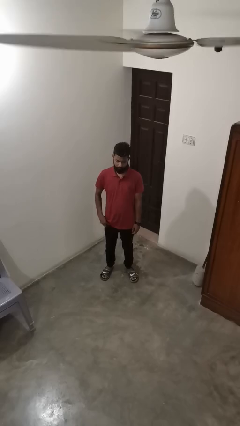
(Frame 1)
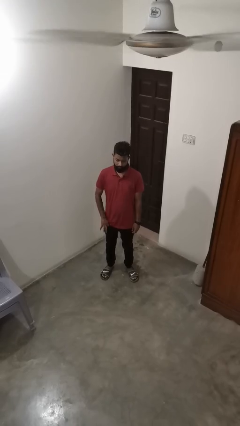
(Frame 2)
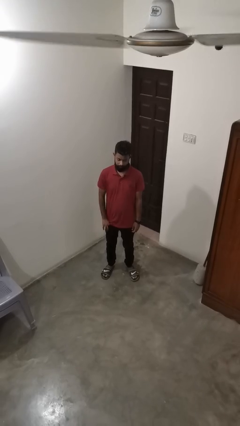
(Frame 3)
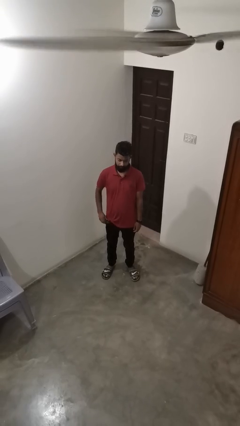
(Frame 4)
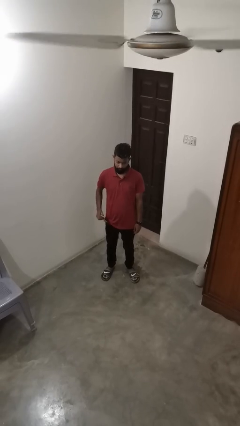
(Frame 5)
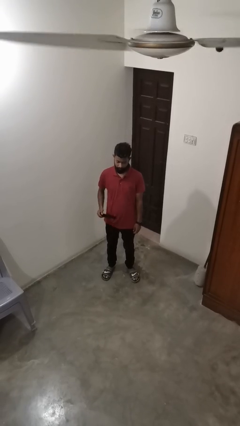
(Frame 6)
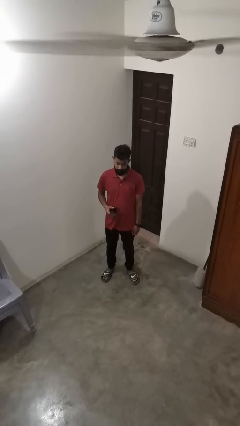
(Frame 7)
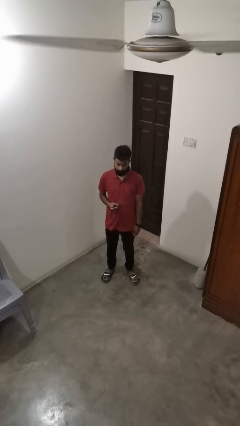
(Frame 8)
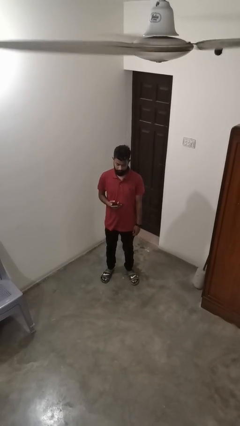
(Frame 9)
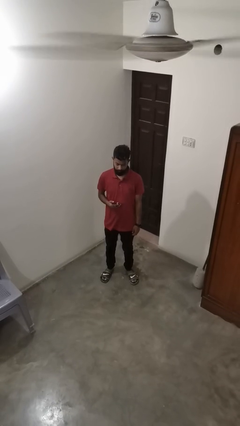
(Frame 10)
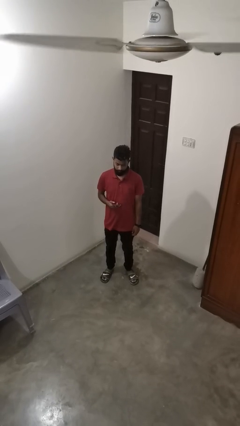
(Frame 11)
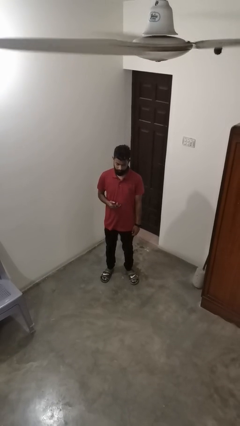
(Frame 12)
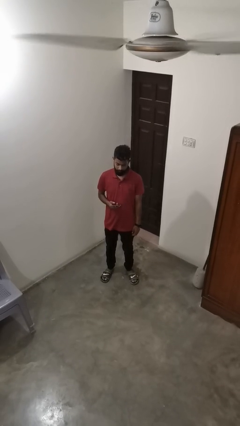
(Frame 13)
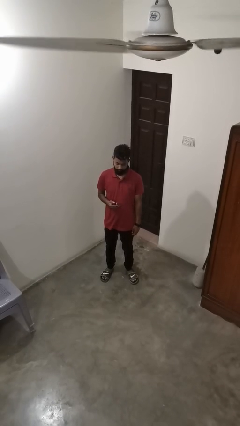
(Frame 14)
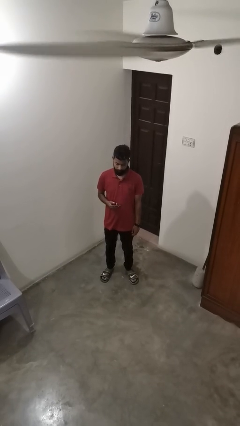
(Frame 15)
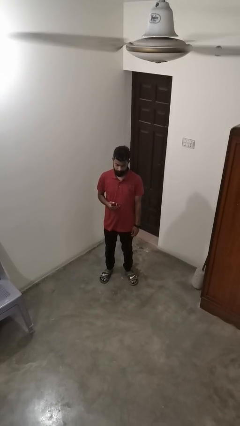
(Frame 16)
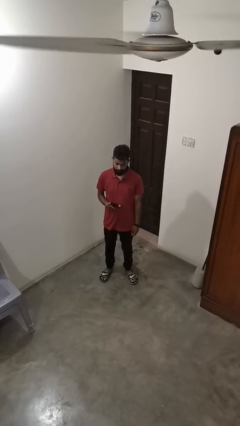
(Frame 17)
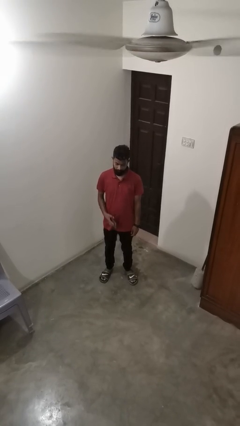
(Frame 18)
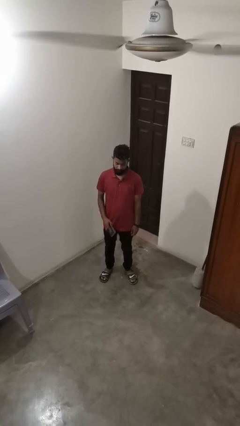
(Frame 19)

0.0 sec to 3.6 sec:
person takes phone from pocket

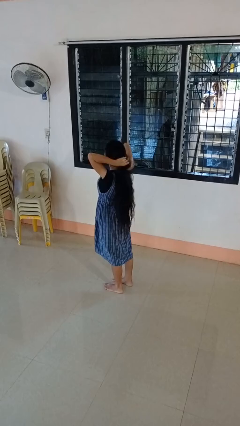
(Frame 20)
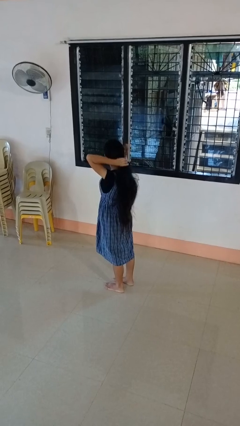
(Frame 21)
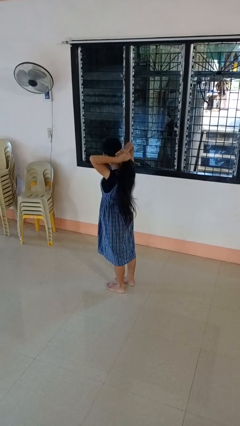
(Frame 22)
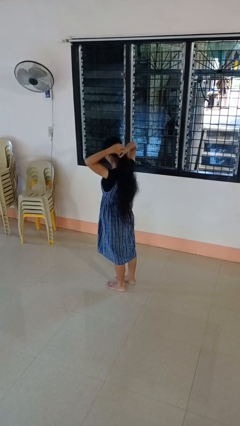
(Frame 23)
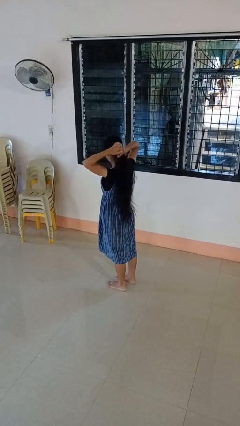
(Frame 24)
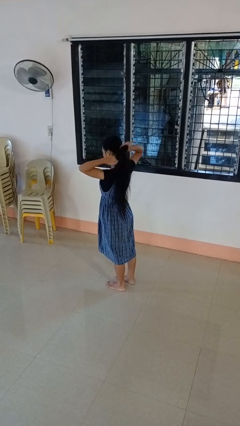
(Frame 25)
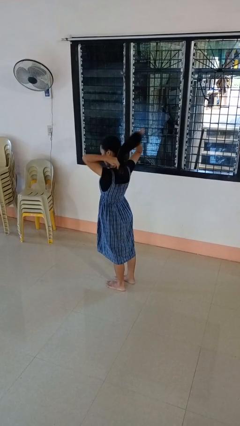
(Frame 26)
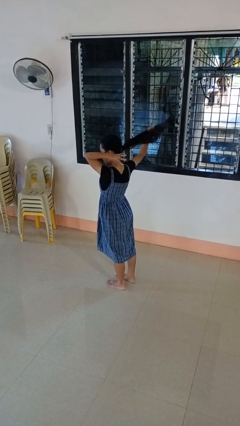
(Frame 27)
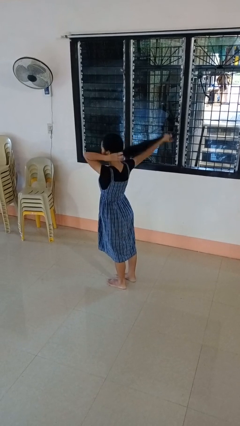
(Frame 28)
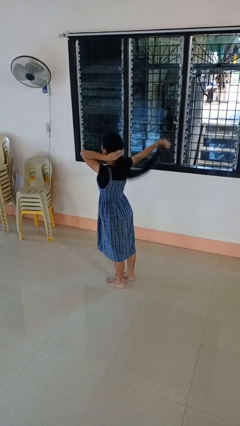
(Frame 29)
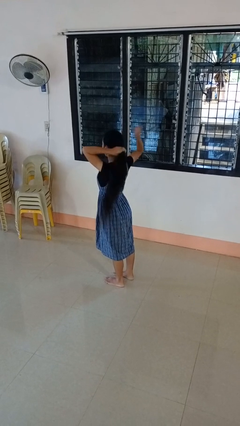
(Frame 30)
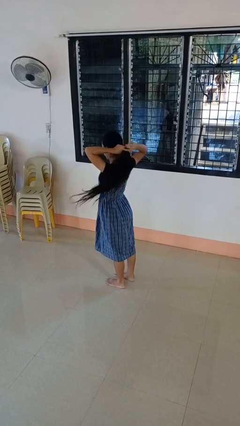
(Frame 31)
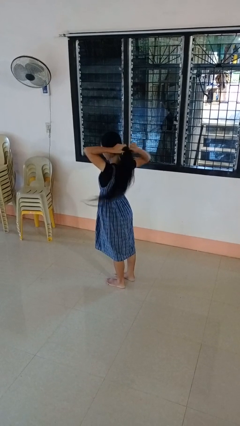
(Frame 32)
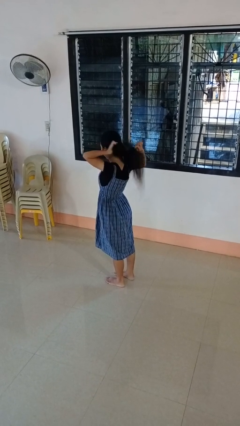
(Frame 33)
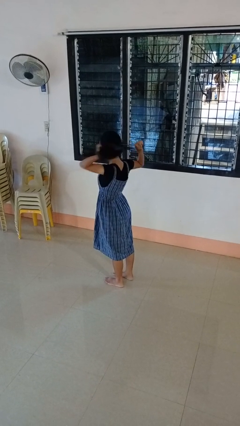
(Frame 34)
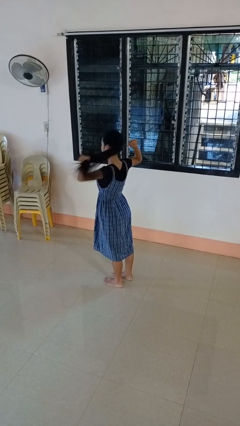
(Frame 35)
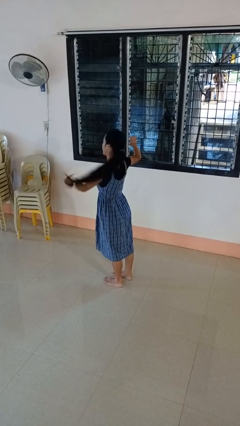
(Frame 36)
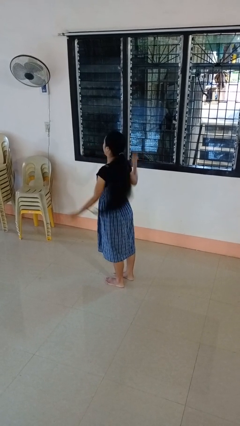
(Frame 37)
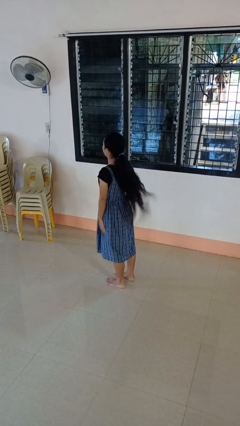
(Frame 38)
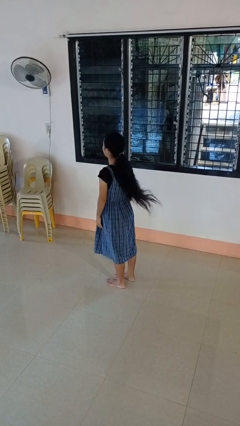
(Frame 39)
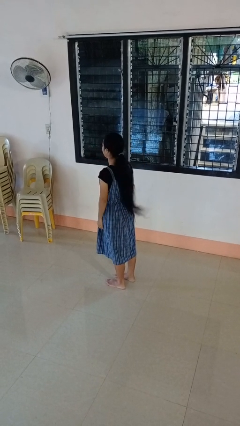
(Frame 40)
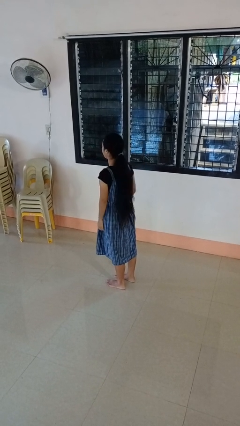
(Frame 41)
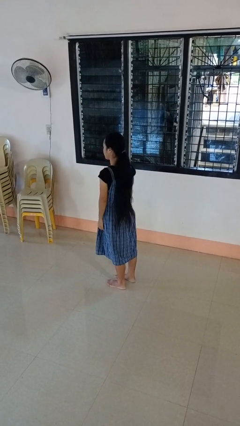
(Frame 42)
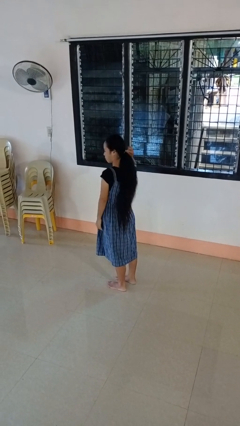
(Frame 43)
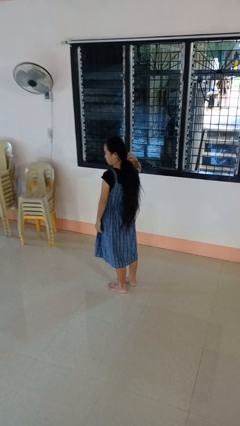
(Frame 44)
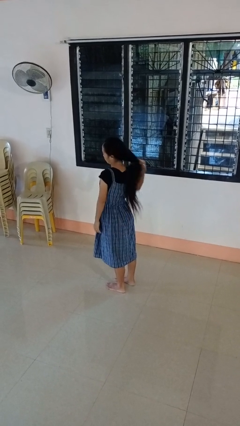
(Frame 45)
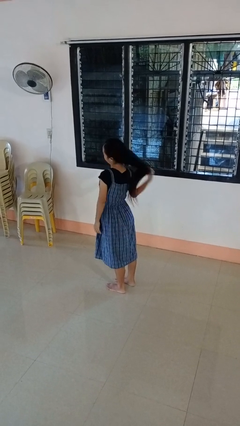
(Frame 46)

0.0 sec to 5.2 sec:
person puts hair in ponytail

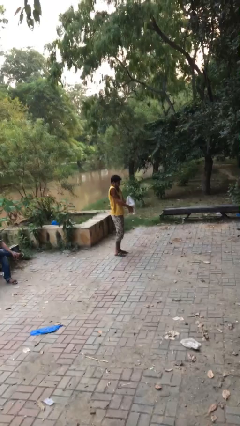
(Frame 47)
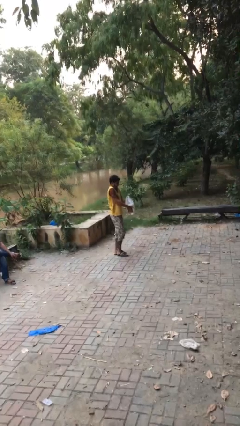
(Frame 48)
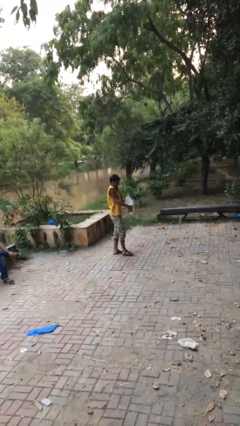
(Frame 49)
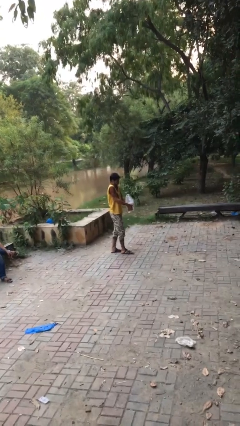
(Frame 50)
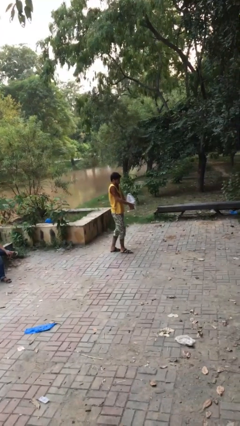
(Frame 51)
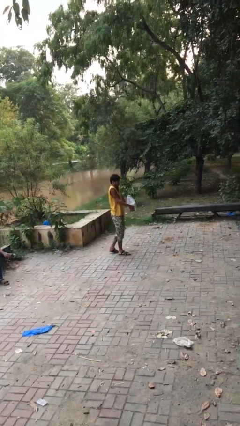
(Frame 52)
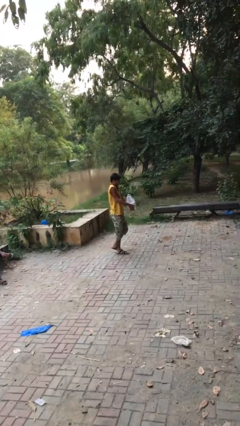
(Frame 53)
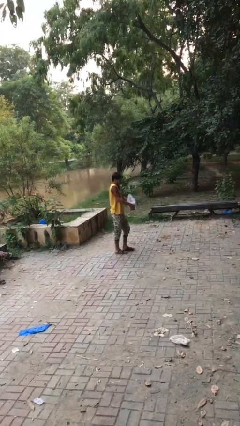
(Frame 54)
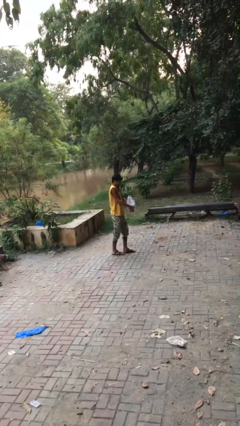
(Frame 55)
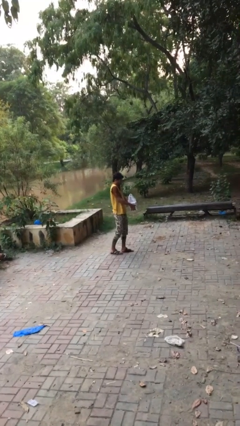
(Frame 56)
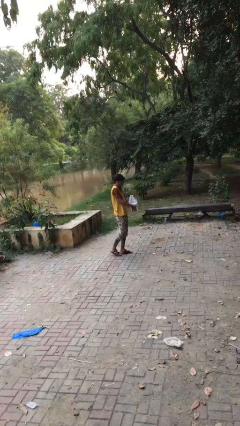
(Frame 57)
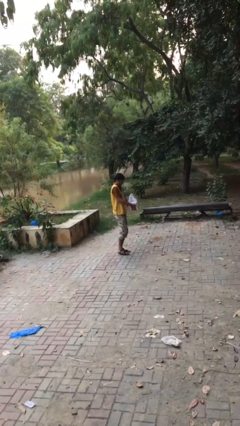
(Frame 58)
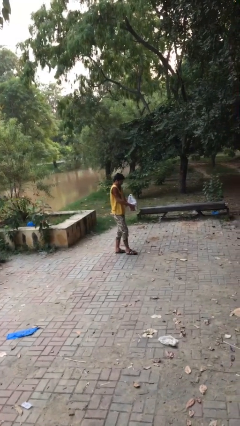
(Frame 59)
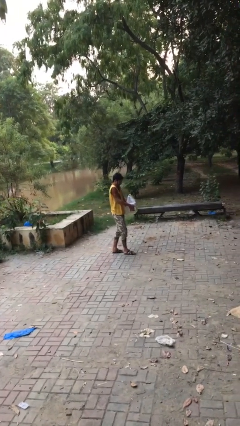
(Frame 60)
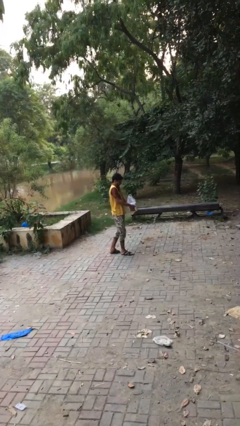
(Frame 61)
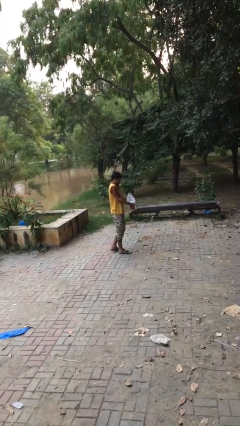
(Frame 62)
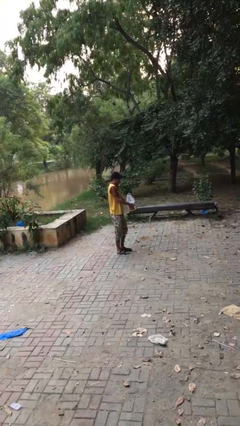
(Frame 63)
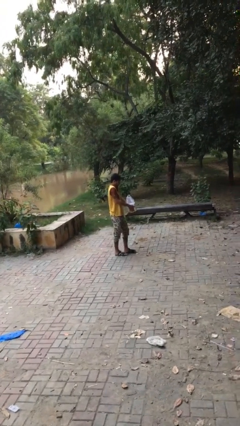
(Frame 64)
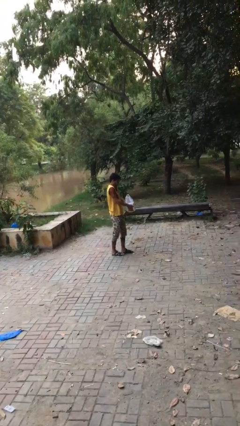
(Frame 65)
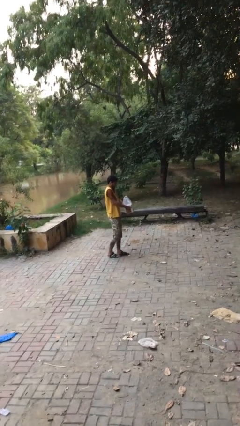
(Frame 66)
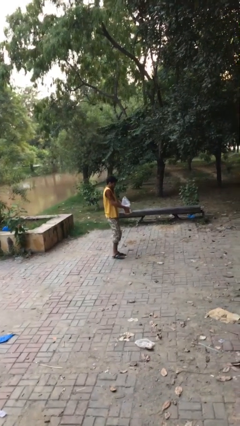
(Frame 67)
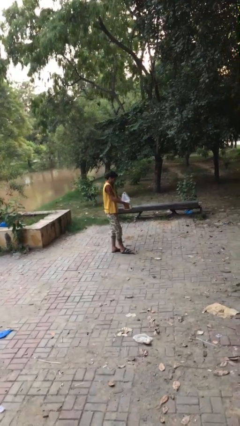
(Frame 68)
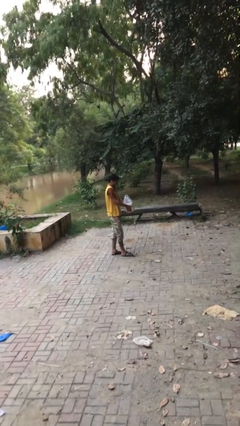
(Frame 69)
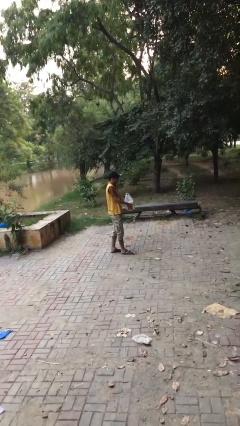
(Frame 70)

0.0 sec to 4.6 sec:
person carries heavy object

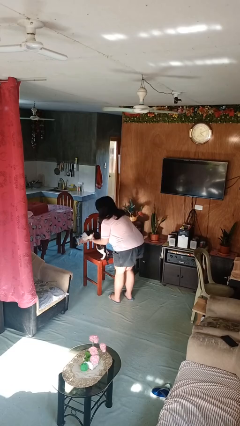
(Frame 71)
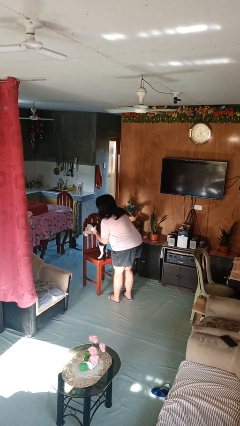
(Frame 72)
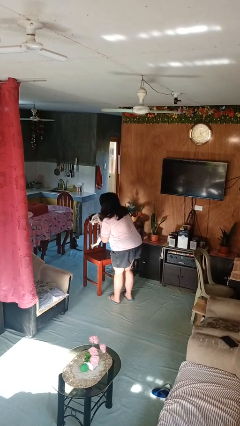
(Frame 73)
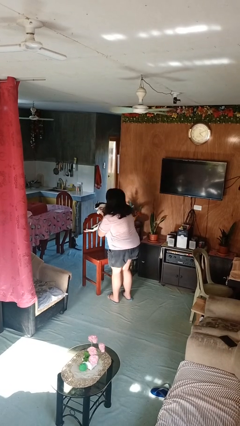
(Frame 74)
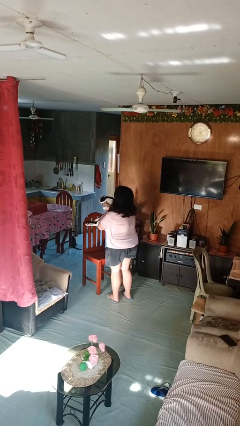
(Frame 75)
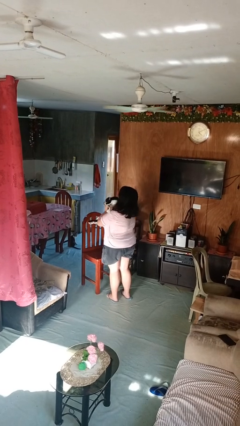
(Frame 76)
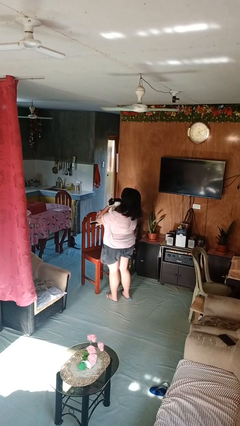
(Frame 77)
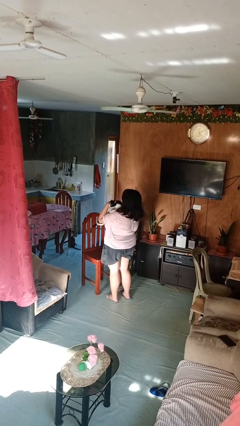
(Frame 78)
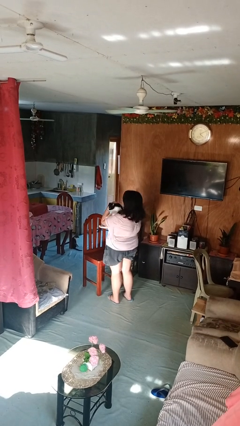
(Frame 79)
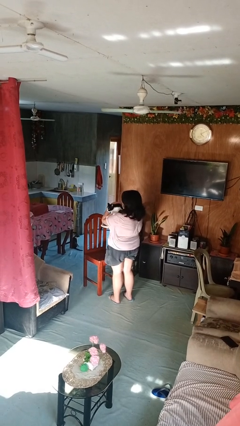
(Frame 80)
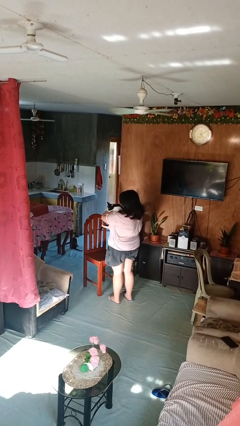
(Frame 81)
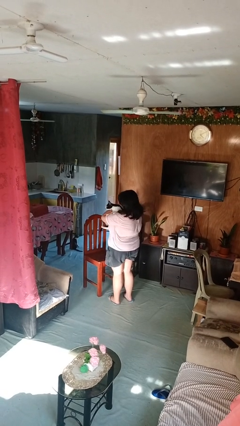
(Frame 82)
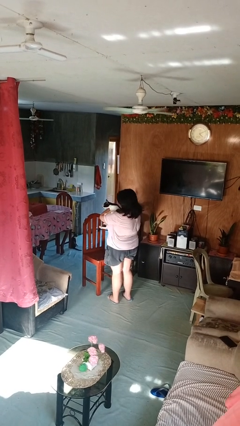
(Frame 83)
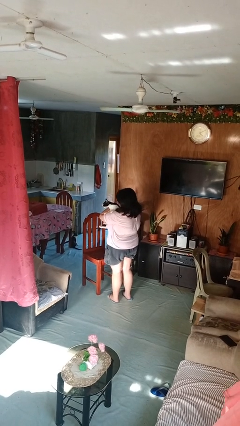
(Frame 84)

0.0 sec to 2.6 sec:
person hugs cat

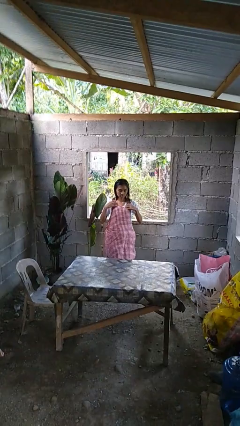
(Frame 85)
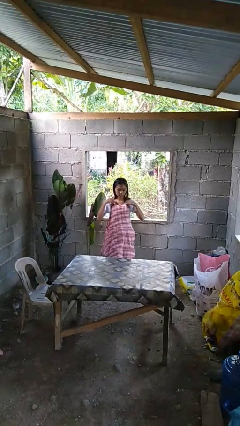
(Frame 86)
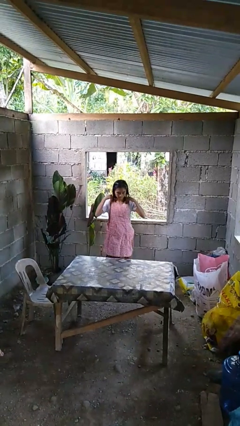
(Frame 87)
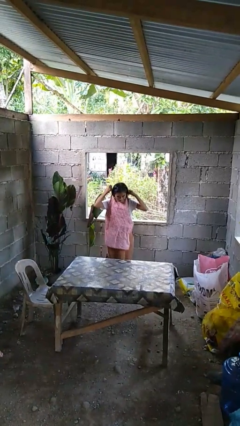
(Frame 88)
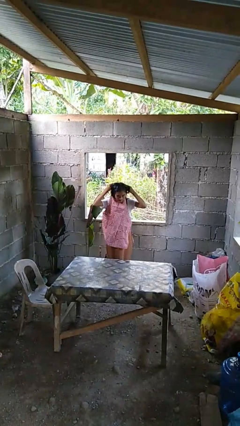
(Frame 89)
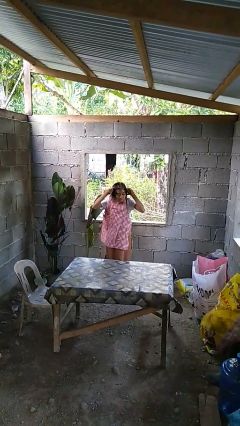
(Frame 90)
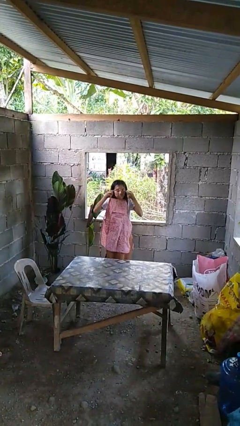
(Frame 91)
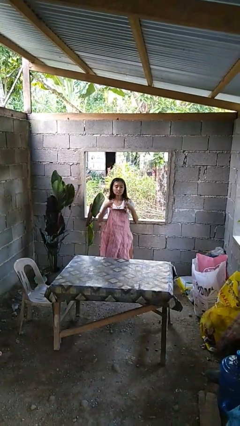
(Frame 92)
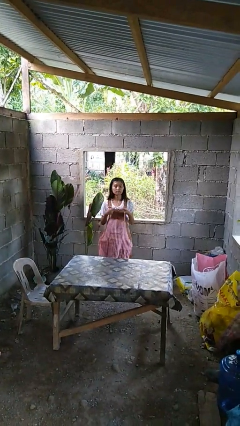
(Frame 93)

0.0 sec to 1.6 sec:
person takes off apron

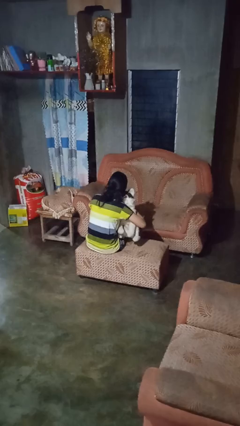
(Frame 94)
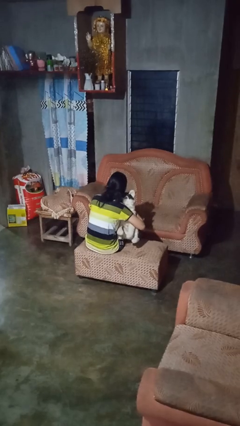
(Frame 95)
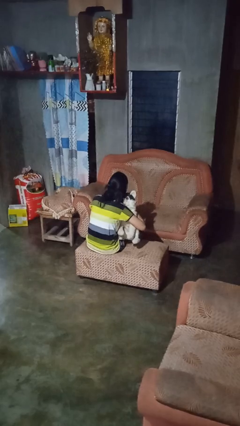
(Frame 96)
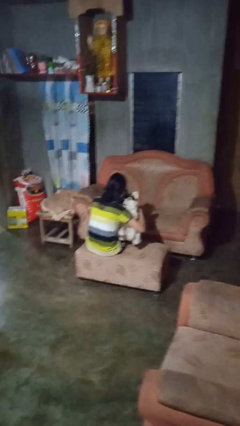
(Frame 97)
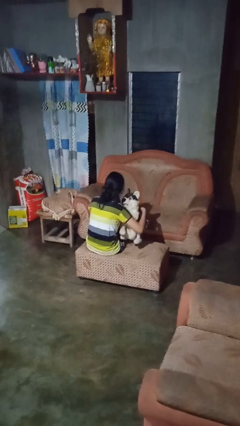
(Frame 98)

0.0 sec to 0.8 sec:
person hugs stuffed animal
